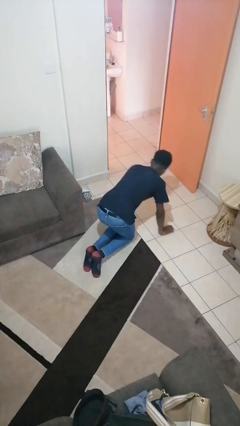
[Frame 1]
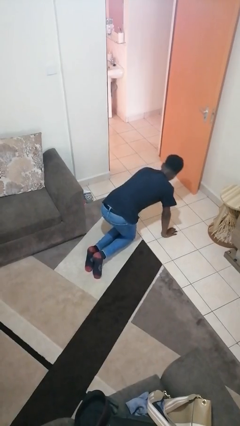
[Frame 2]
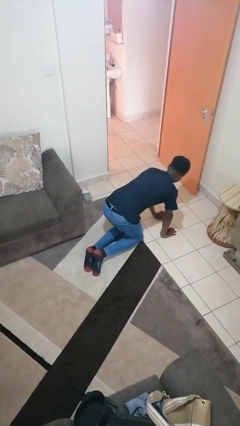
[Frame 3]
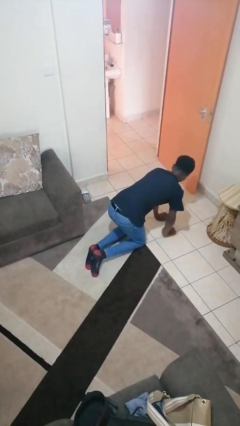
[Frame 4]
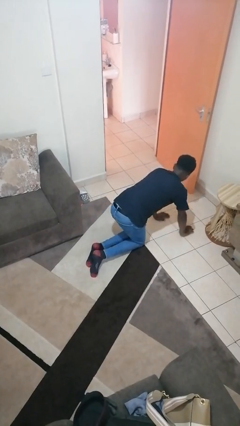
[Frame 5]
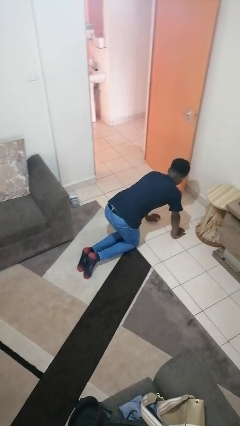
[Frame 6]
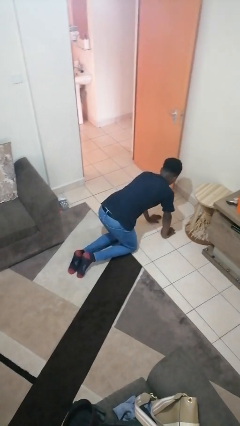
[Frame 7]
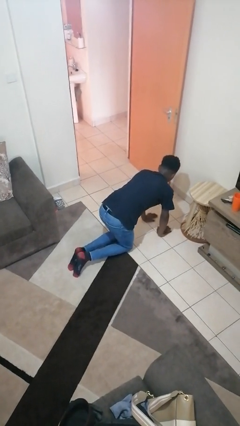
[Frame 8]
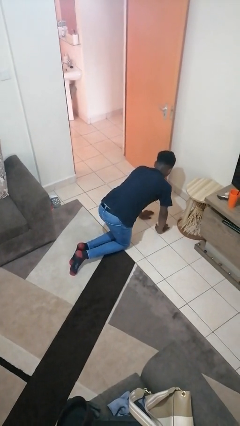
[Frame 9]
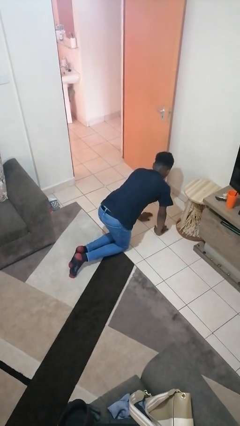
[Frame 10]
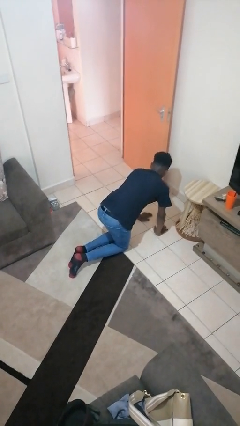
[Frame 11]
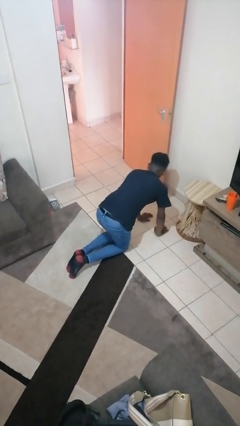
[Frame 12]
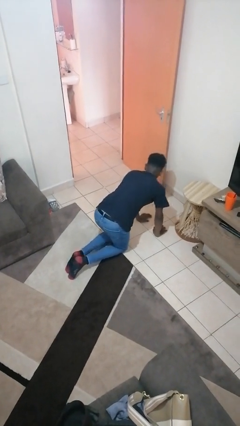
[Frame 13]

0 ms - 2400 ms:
person crawls

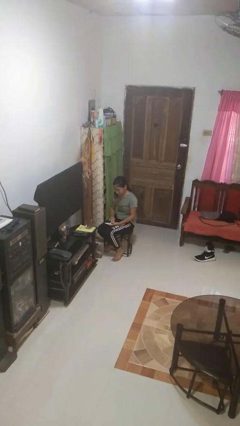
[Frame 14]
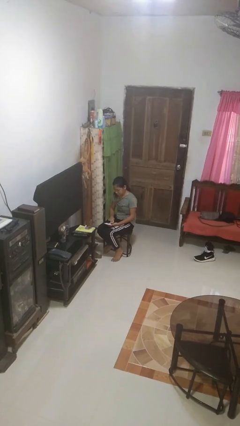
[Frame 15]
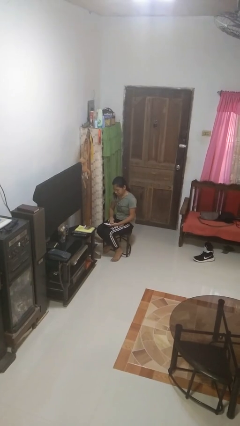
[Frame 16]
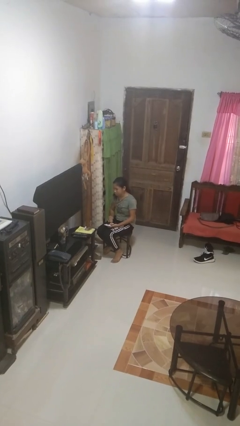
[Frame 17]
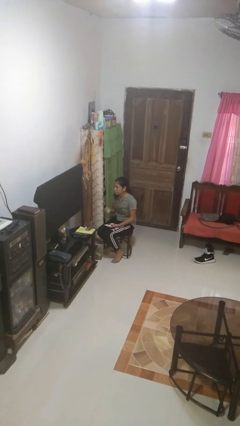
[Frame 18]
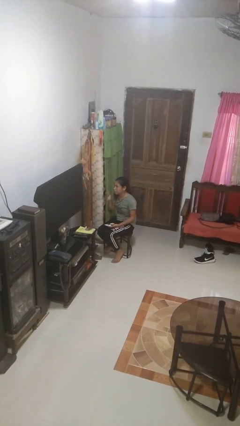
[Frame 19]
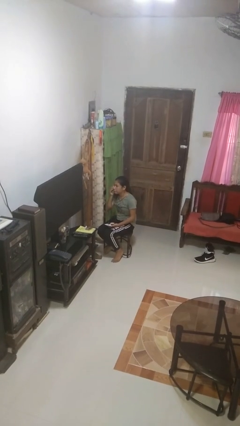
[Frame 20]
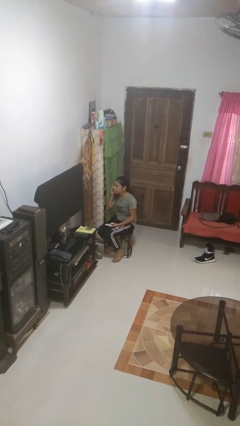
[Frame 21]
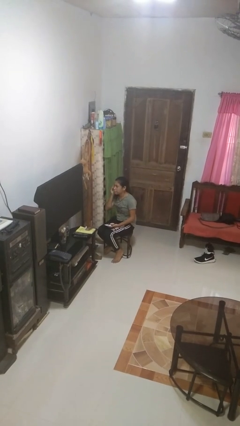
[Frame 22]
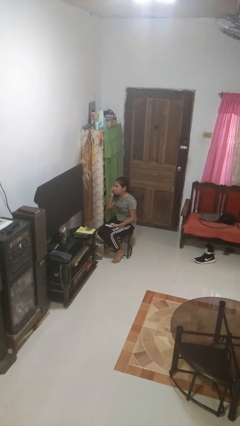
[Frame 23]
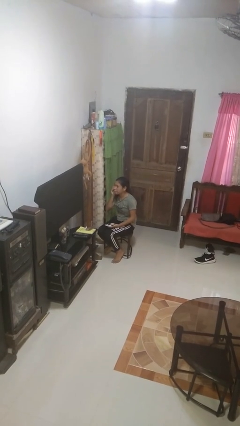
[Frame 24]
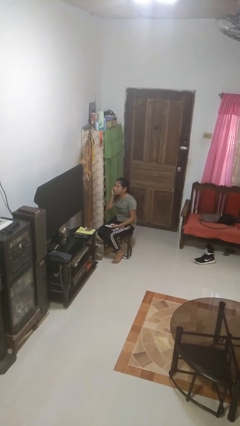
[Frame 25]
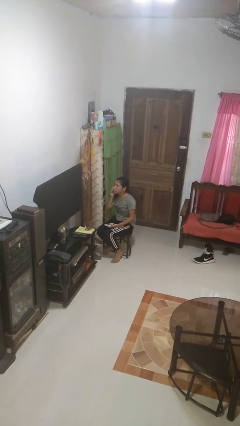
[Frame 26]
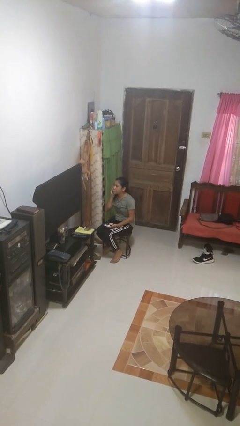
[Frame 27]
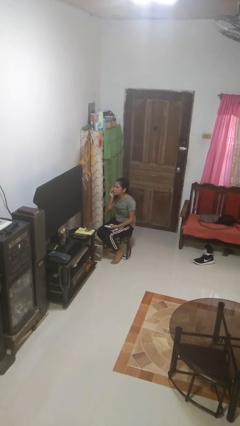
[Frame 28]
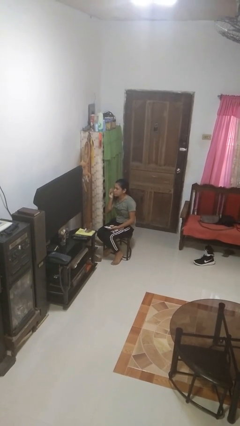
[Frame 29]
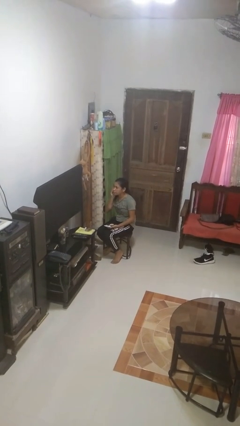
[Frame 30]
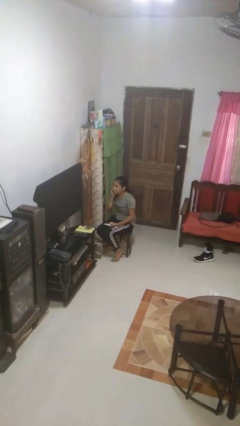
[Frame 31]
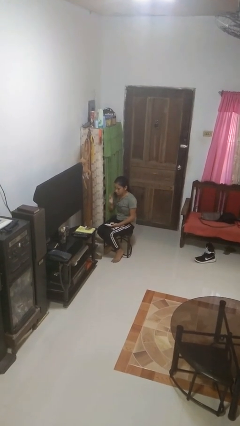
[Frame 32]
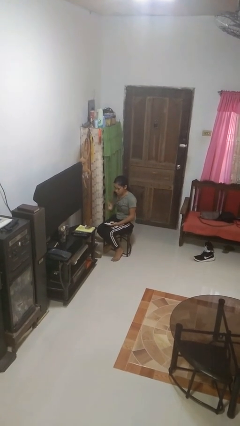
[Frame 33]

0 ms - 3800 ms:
person applies foundation makeup

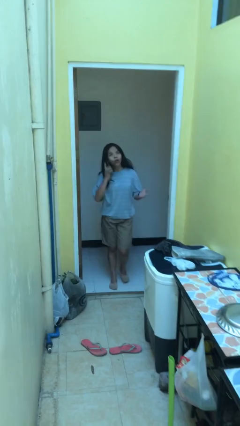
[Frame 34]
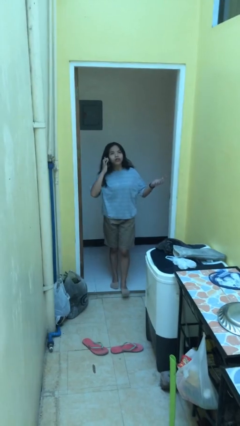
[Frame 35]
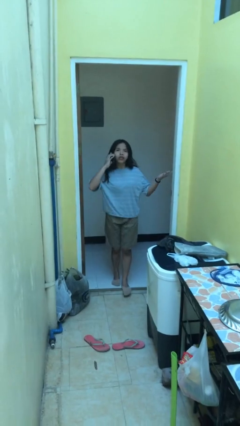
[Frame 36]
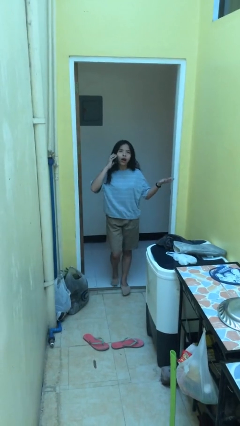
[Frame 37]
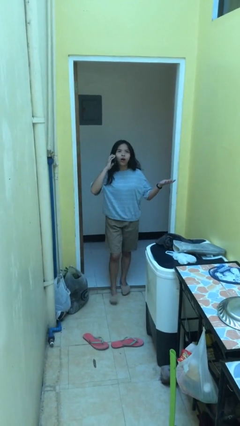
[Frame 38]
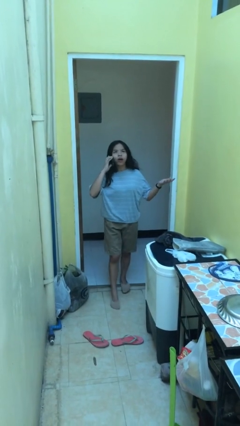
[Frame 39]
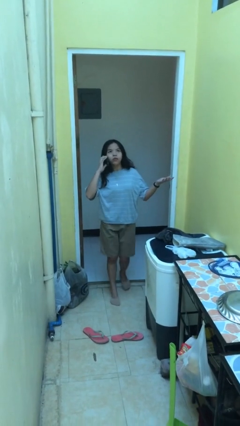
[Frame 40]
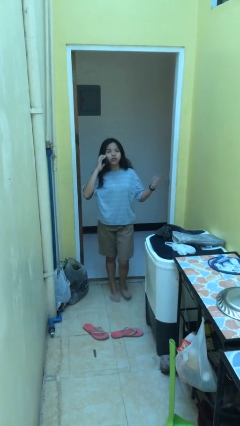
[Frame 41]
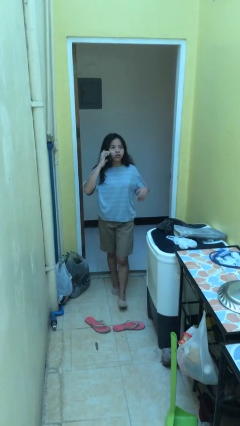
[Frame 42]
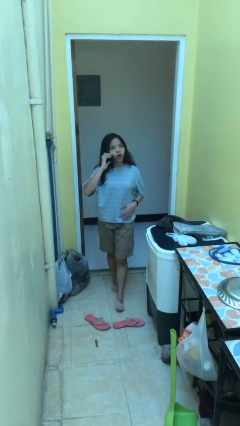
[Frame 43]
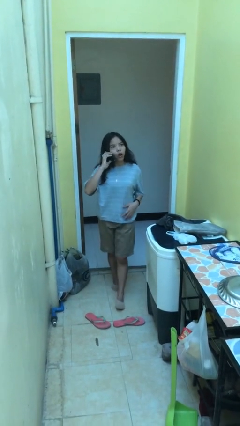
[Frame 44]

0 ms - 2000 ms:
person talks on phone

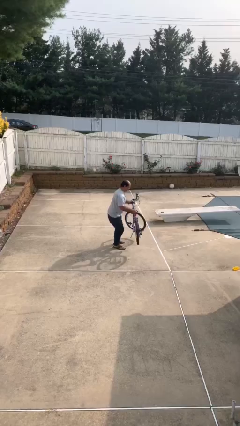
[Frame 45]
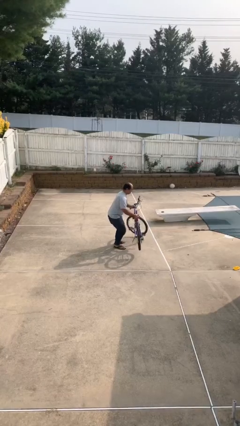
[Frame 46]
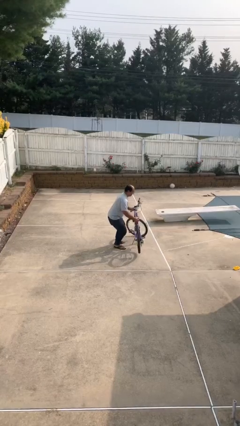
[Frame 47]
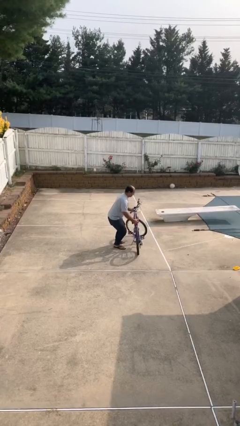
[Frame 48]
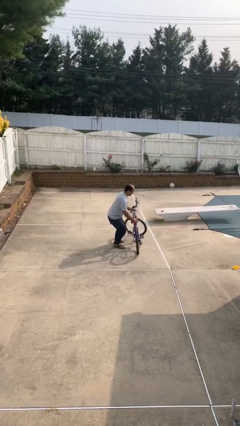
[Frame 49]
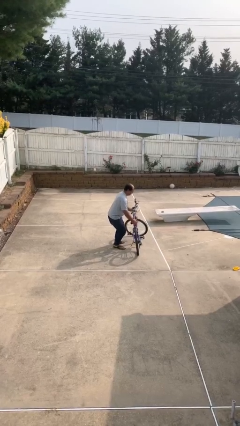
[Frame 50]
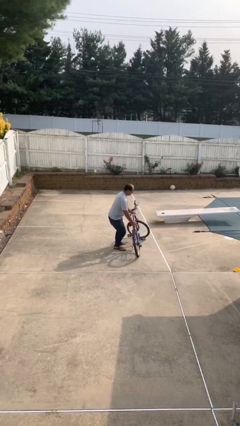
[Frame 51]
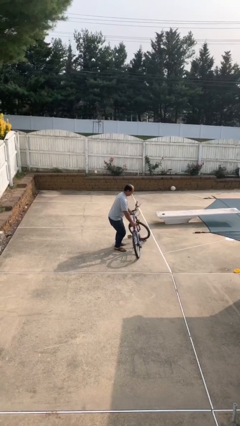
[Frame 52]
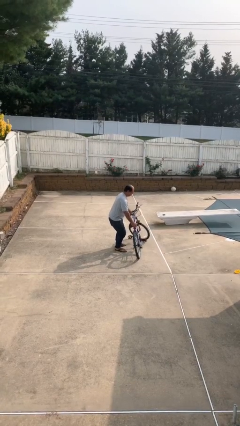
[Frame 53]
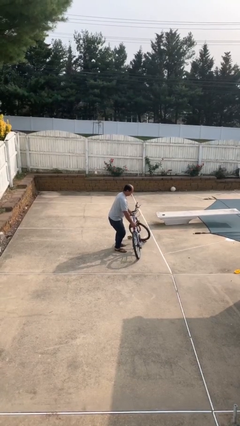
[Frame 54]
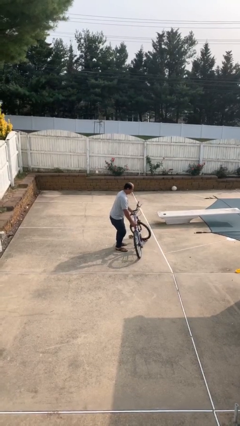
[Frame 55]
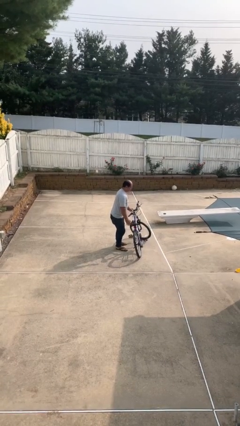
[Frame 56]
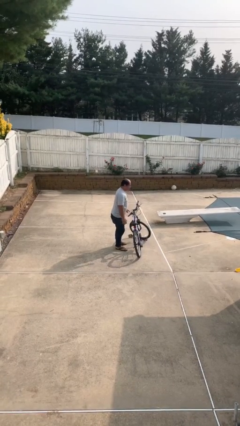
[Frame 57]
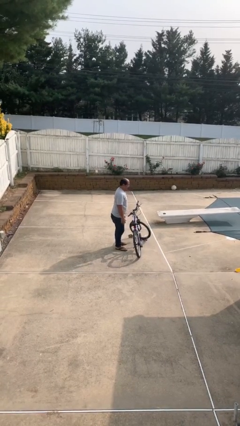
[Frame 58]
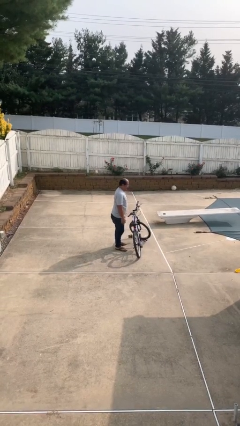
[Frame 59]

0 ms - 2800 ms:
person puts down object on floor

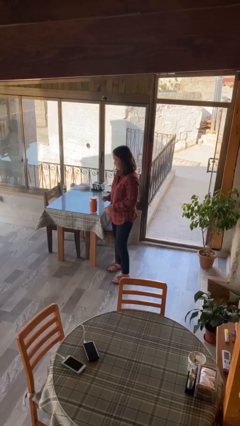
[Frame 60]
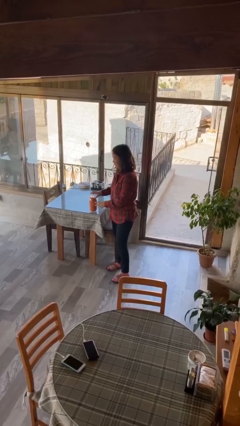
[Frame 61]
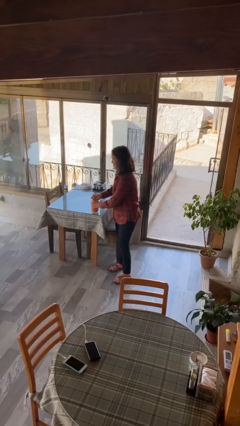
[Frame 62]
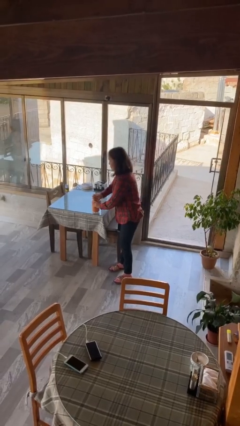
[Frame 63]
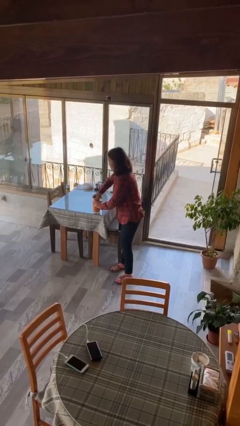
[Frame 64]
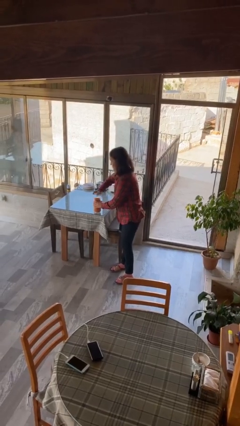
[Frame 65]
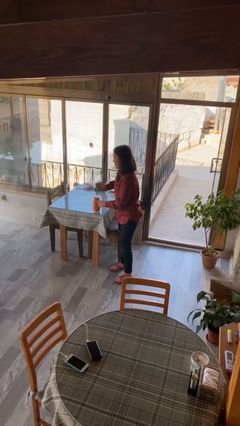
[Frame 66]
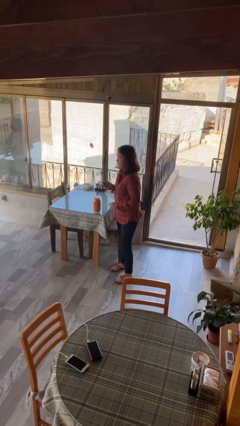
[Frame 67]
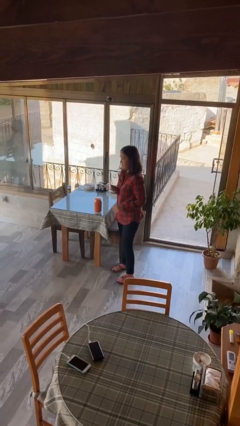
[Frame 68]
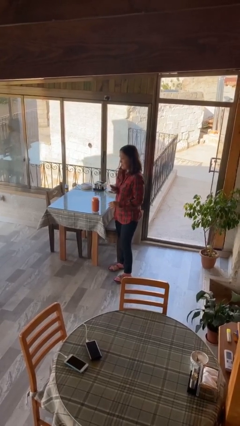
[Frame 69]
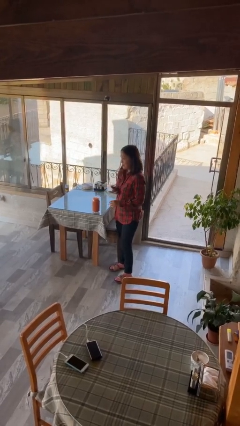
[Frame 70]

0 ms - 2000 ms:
person opens jar

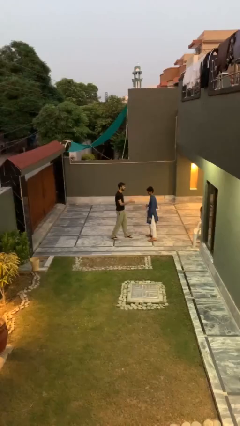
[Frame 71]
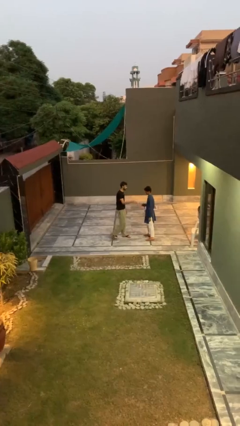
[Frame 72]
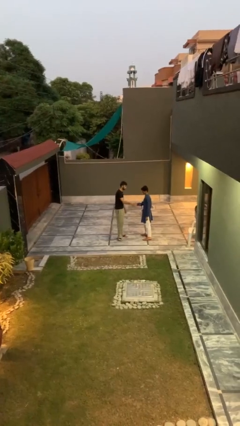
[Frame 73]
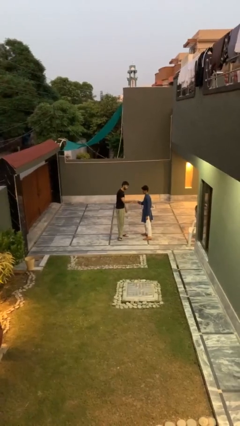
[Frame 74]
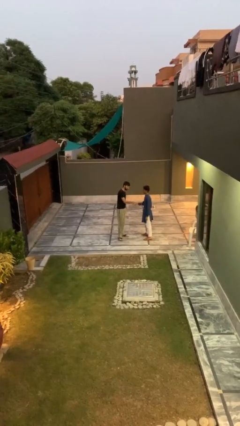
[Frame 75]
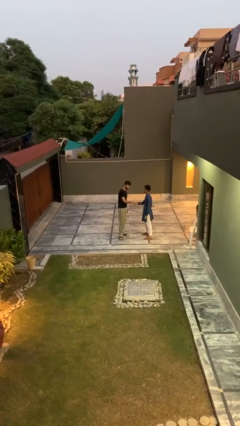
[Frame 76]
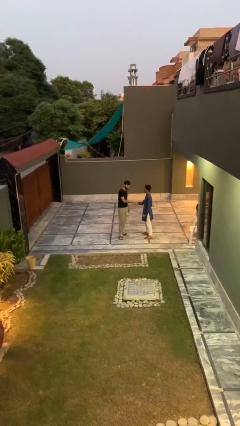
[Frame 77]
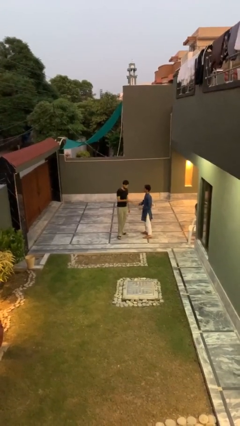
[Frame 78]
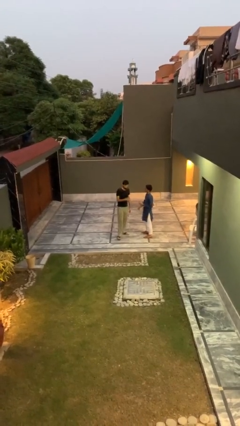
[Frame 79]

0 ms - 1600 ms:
person shakes hand

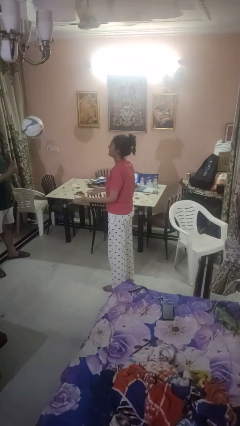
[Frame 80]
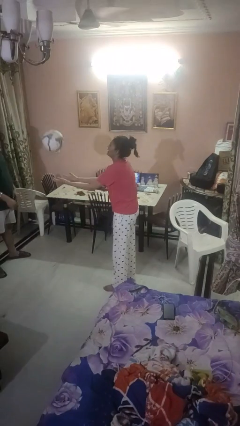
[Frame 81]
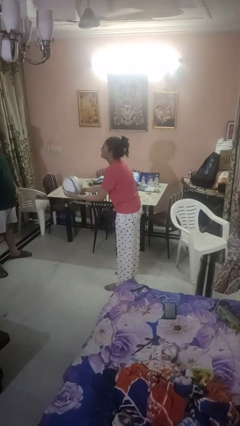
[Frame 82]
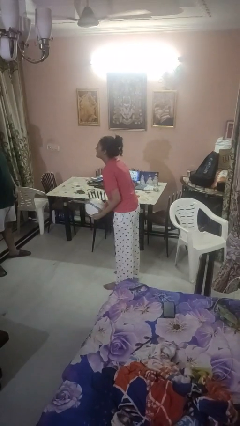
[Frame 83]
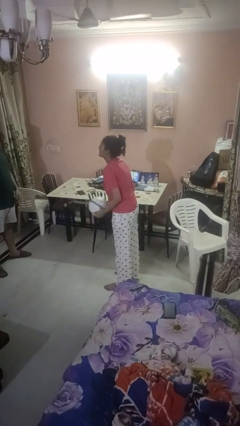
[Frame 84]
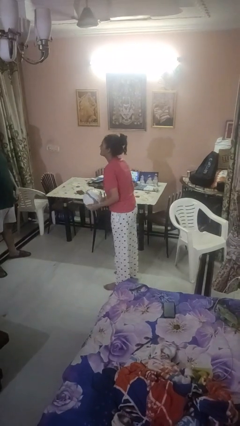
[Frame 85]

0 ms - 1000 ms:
person catches object from person

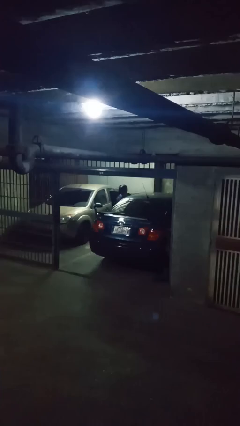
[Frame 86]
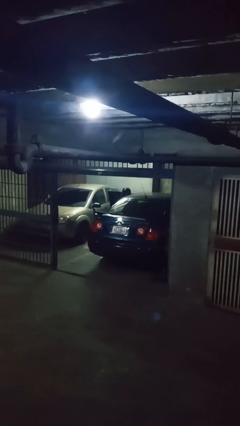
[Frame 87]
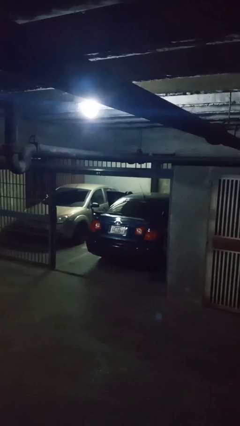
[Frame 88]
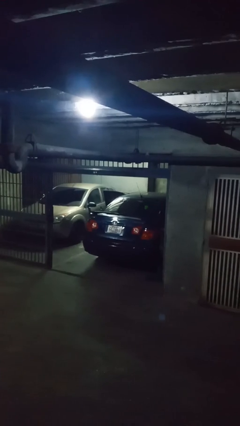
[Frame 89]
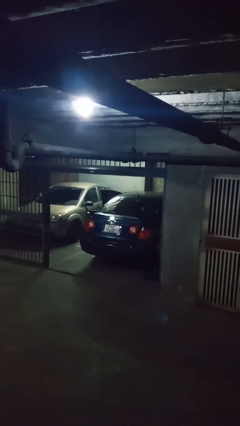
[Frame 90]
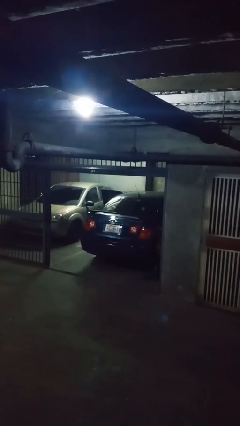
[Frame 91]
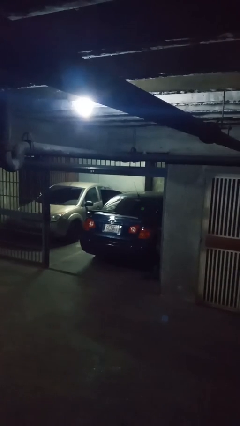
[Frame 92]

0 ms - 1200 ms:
person loads car

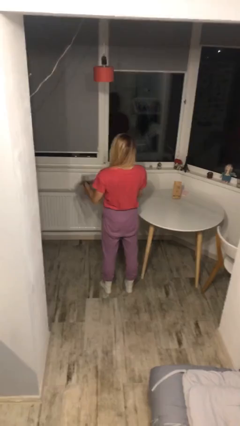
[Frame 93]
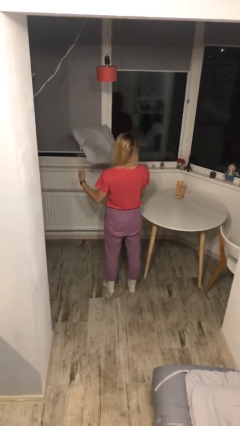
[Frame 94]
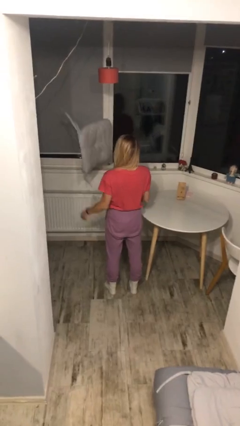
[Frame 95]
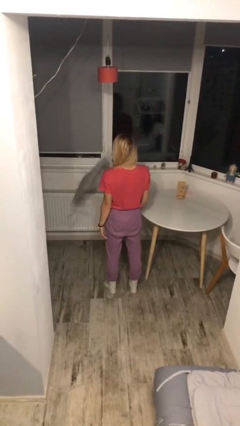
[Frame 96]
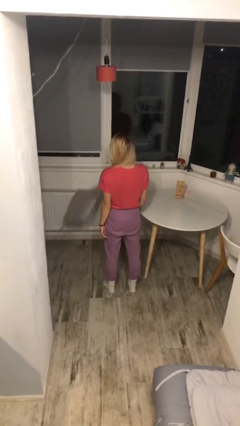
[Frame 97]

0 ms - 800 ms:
person throws object into air
